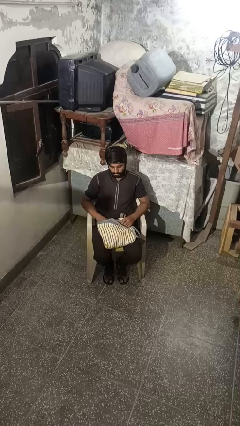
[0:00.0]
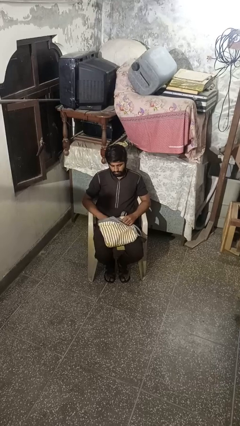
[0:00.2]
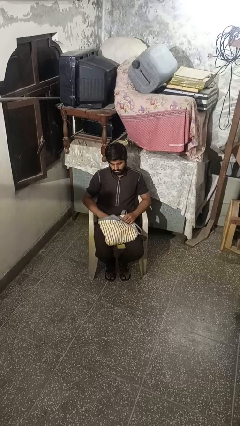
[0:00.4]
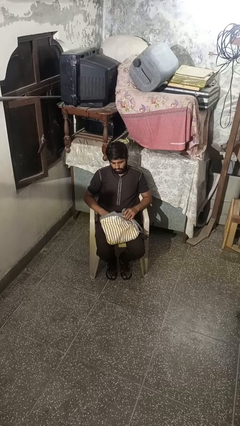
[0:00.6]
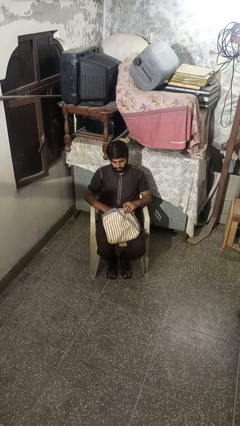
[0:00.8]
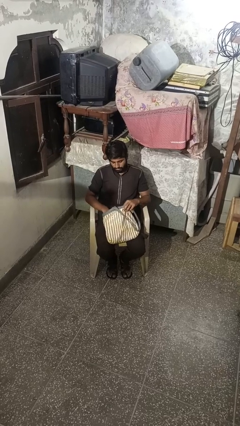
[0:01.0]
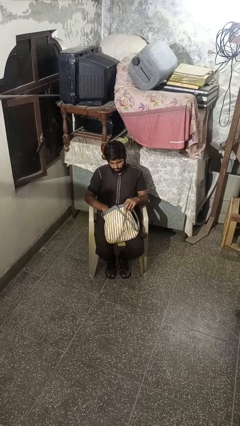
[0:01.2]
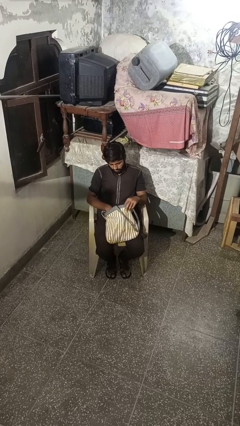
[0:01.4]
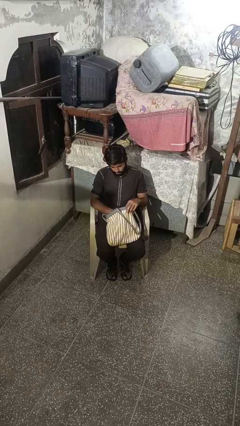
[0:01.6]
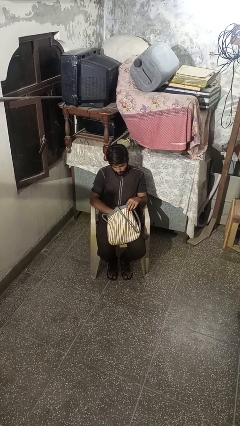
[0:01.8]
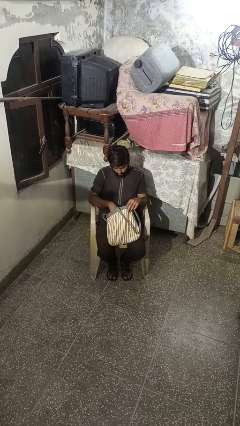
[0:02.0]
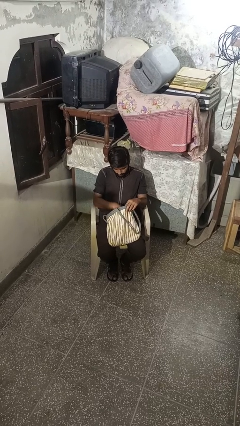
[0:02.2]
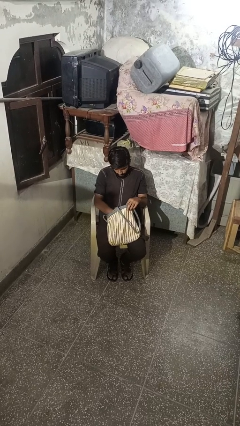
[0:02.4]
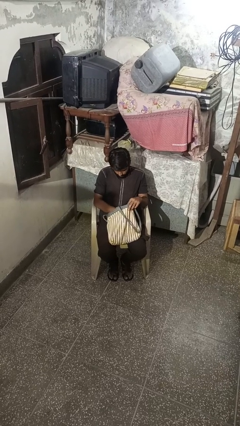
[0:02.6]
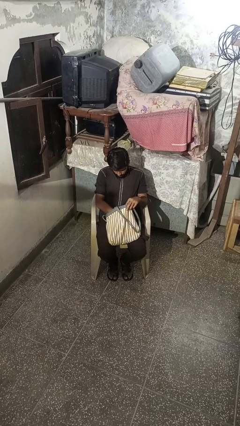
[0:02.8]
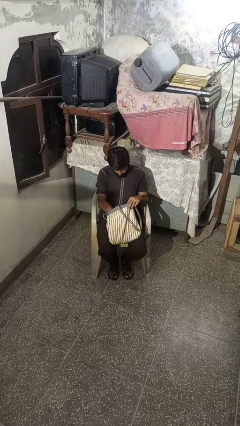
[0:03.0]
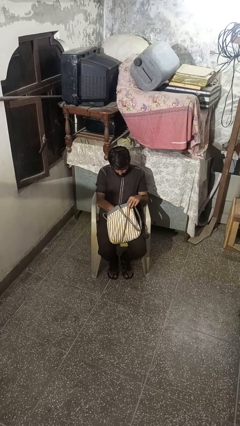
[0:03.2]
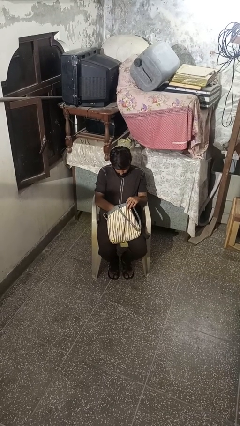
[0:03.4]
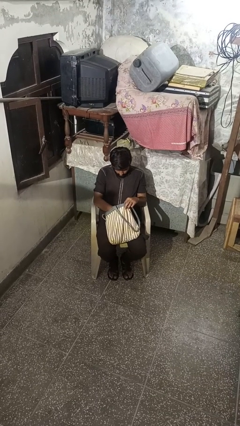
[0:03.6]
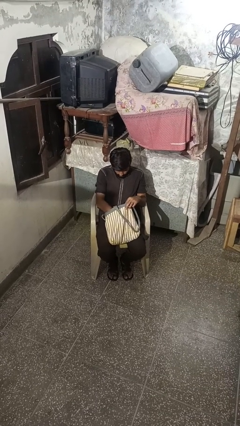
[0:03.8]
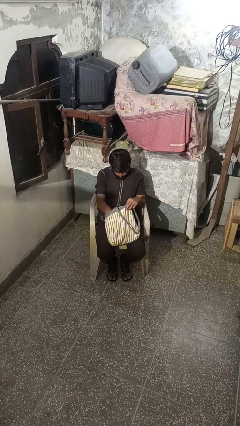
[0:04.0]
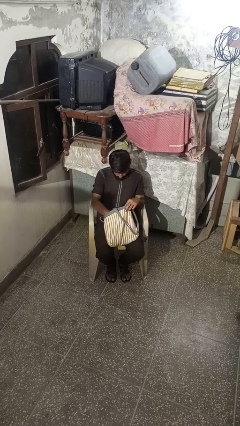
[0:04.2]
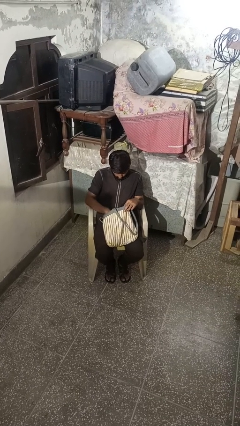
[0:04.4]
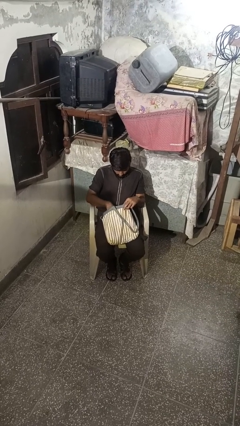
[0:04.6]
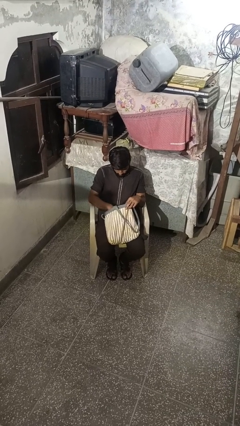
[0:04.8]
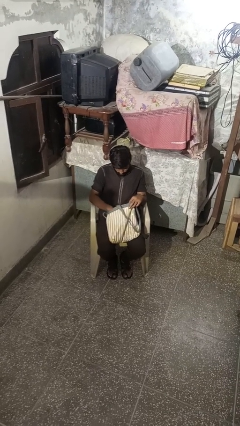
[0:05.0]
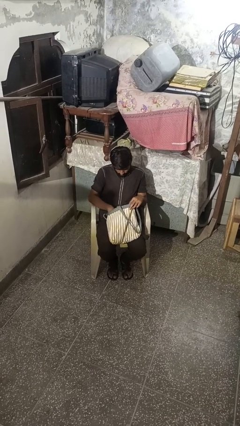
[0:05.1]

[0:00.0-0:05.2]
person searches in backpack

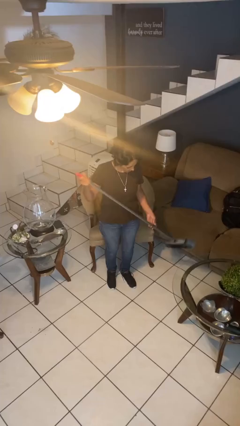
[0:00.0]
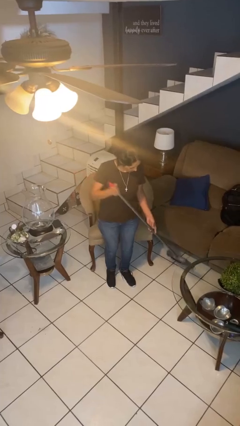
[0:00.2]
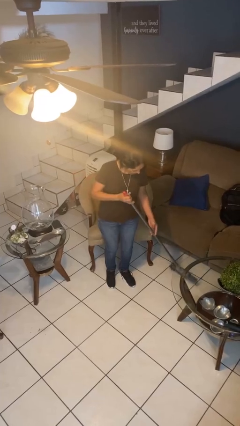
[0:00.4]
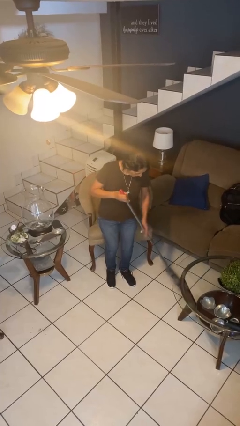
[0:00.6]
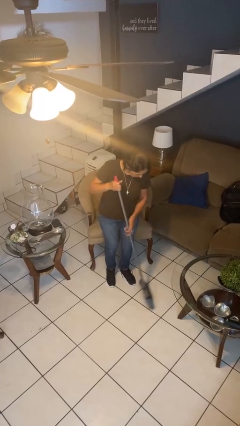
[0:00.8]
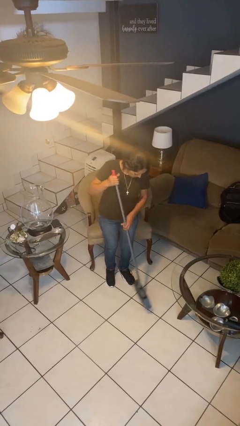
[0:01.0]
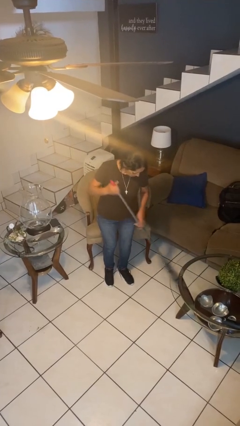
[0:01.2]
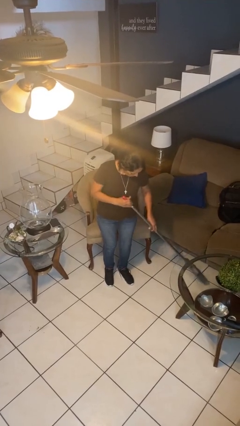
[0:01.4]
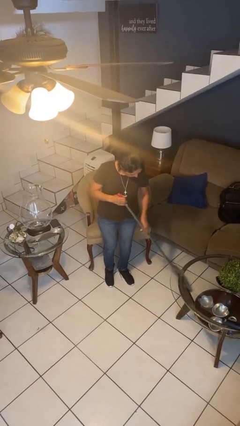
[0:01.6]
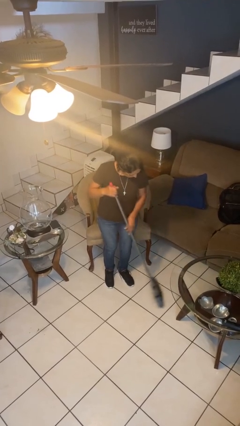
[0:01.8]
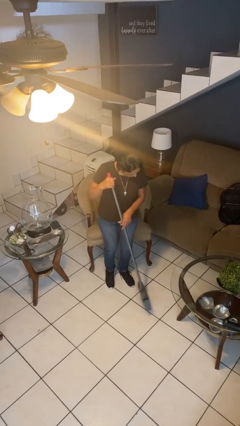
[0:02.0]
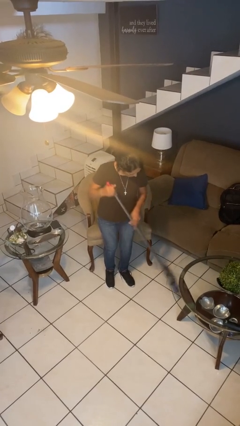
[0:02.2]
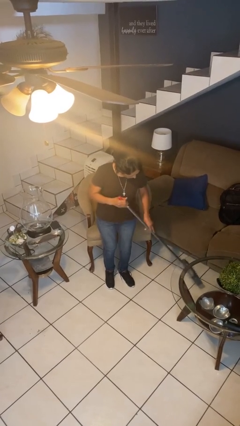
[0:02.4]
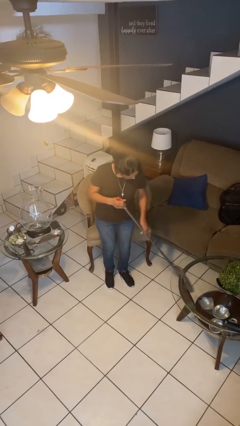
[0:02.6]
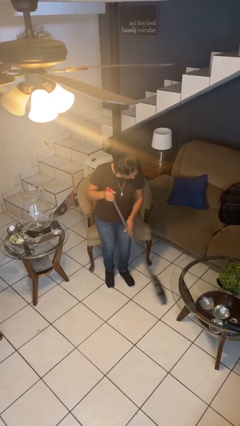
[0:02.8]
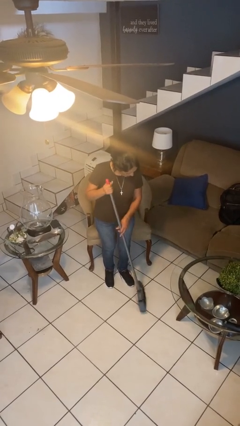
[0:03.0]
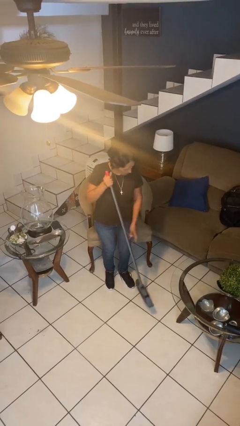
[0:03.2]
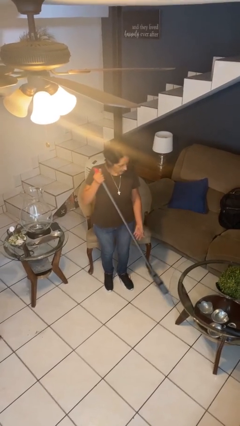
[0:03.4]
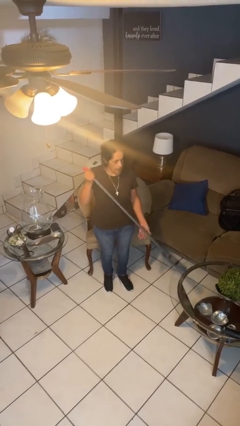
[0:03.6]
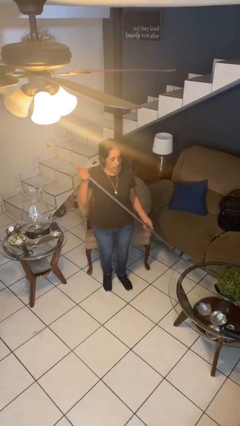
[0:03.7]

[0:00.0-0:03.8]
person sweeps floor

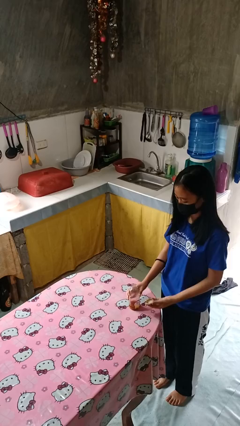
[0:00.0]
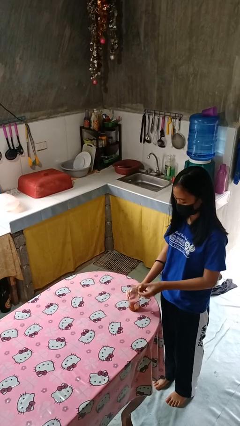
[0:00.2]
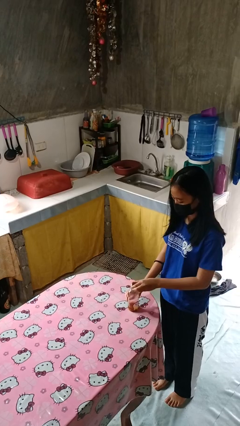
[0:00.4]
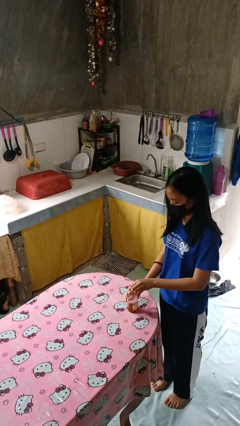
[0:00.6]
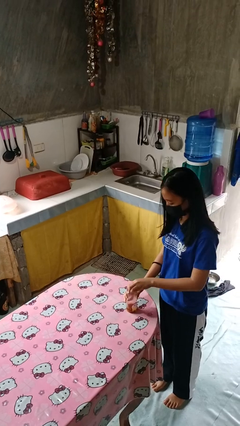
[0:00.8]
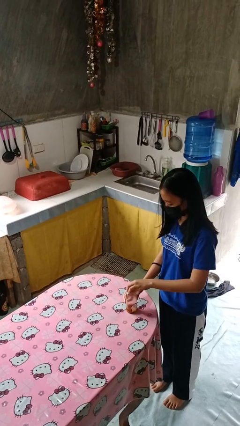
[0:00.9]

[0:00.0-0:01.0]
person closes jar

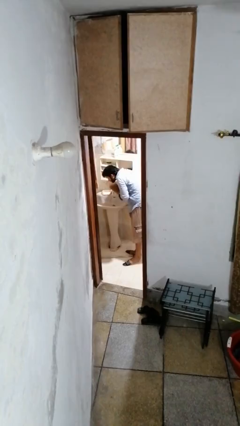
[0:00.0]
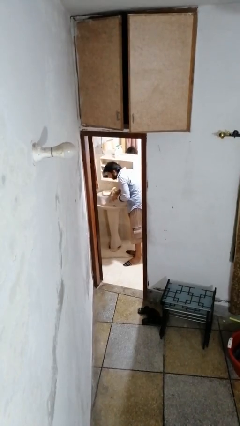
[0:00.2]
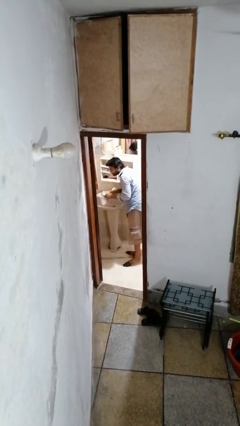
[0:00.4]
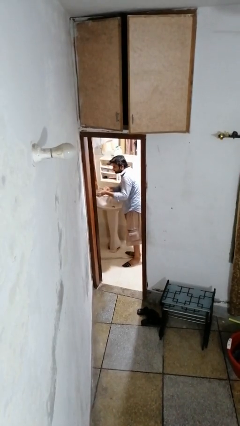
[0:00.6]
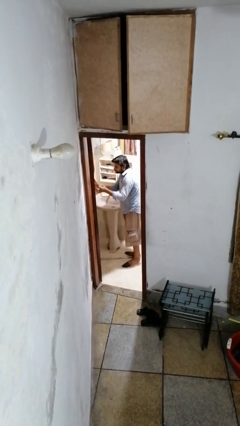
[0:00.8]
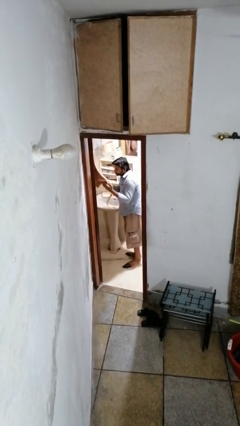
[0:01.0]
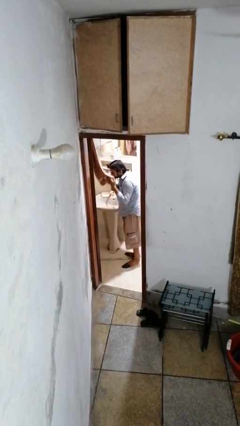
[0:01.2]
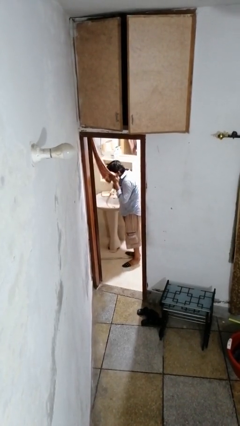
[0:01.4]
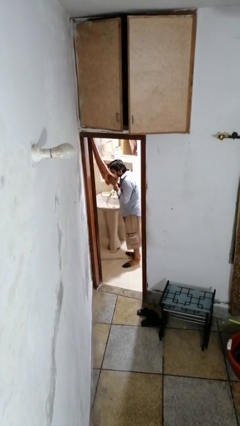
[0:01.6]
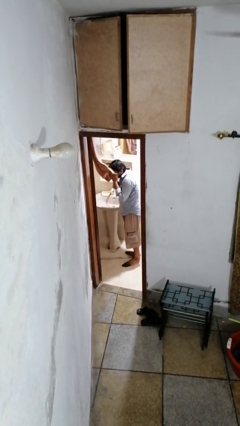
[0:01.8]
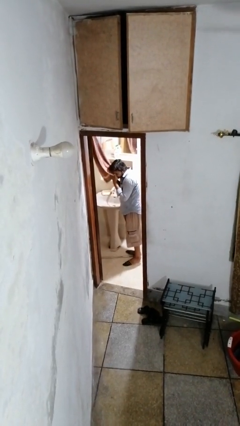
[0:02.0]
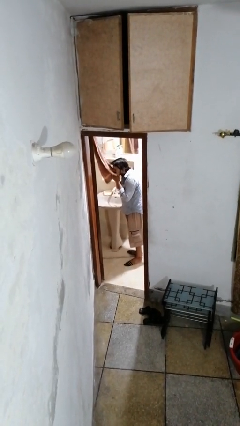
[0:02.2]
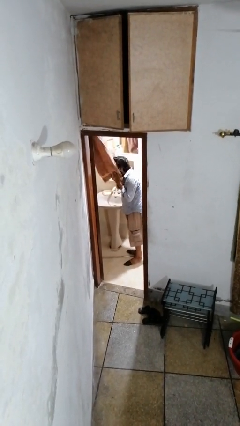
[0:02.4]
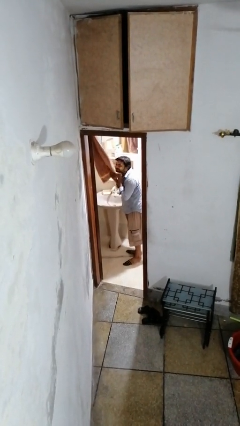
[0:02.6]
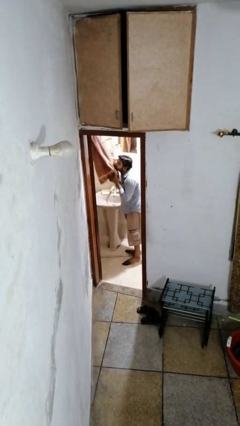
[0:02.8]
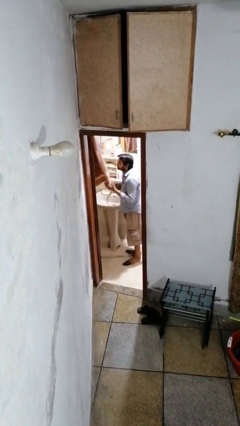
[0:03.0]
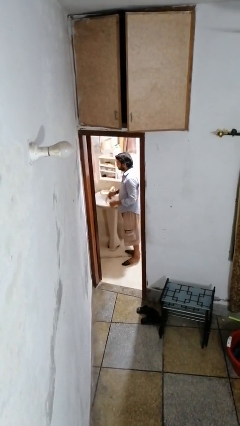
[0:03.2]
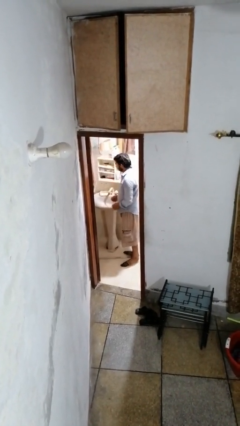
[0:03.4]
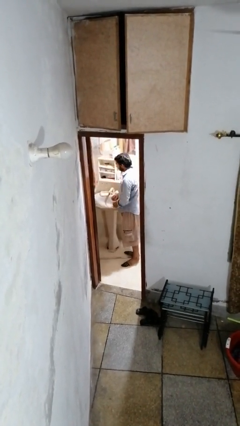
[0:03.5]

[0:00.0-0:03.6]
person dries face with towel

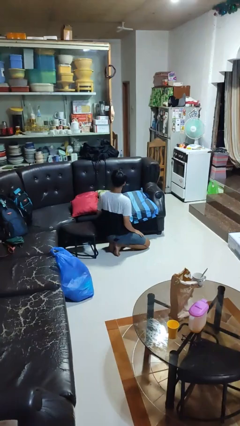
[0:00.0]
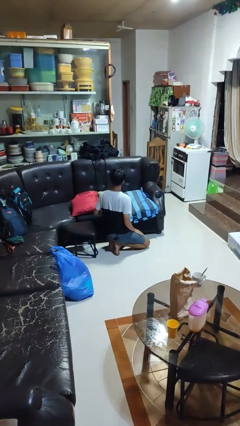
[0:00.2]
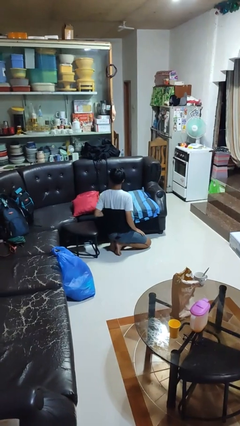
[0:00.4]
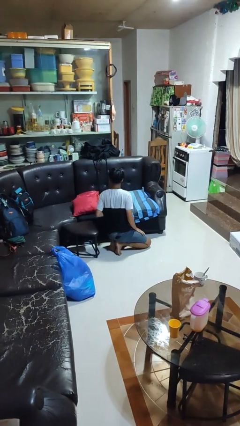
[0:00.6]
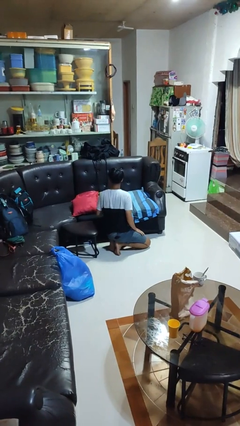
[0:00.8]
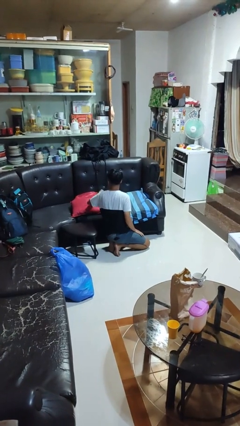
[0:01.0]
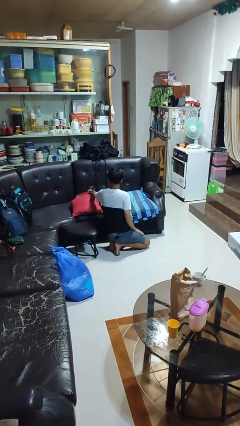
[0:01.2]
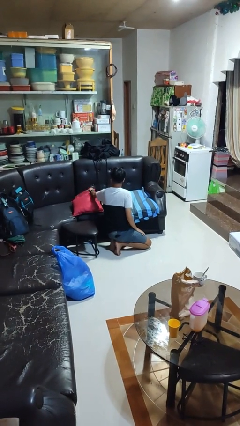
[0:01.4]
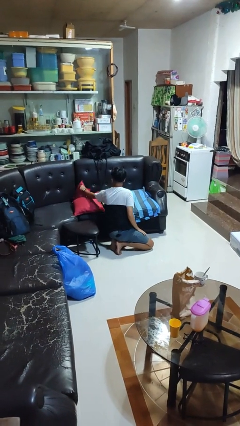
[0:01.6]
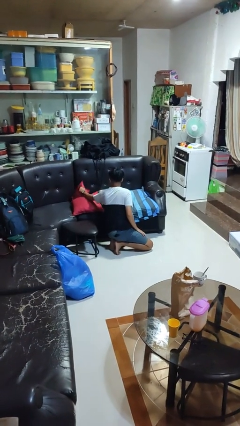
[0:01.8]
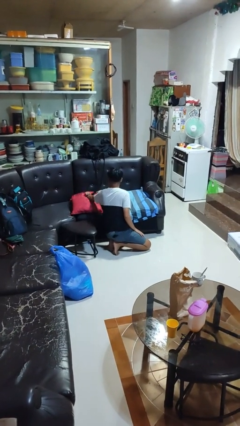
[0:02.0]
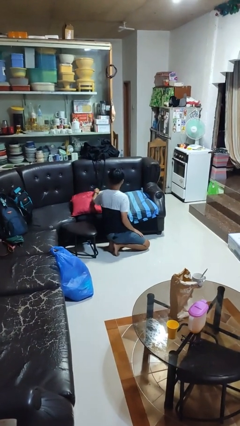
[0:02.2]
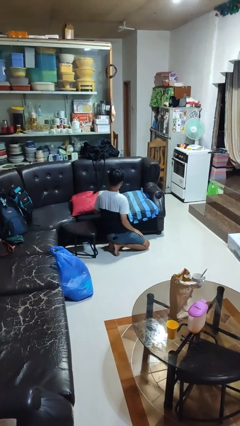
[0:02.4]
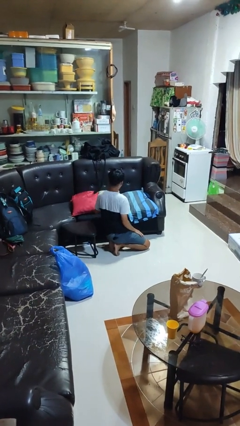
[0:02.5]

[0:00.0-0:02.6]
person searches in couch

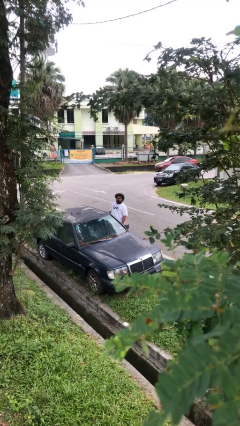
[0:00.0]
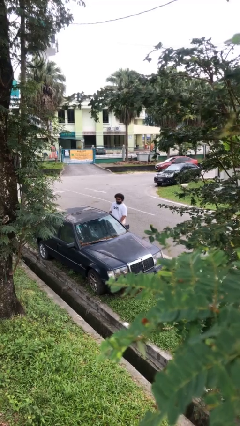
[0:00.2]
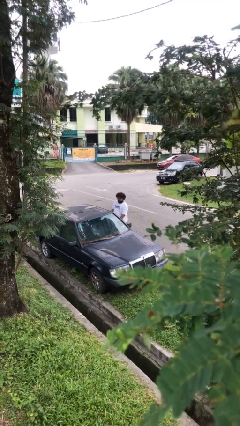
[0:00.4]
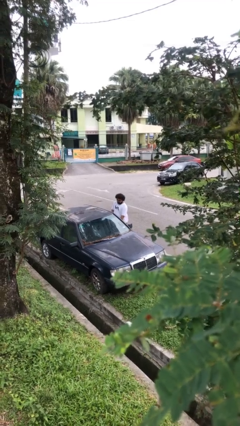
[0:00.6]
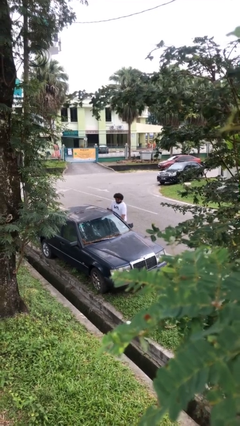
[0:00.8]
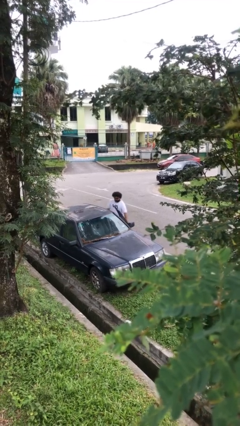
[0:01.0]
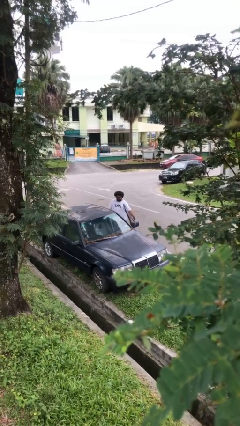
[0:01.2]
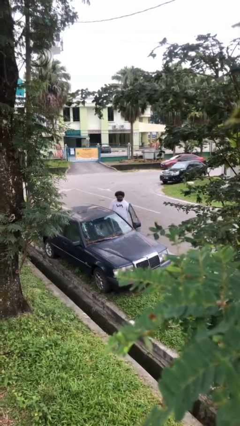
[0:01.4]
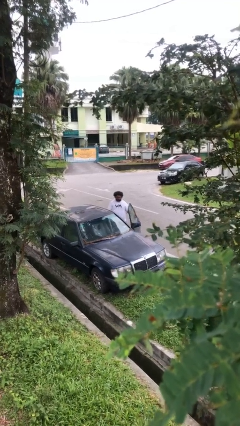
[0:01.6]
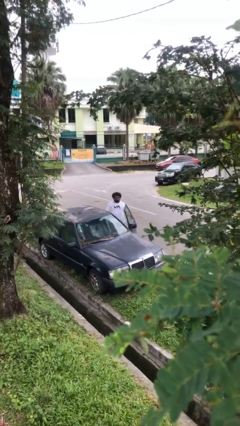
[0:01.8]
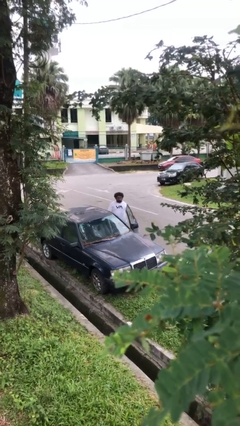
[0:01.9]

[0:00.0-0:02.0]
person opens car door
